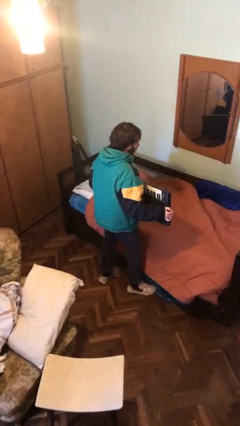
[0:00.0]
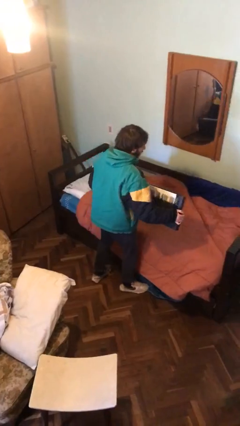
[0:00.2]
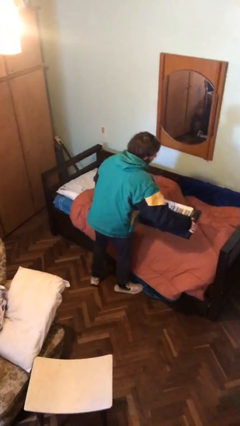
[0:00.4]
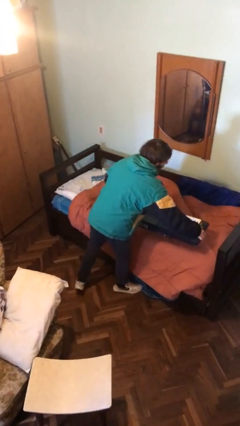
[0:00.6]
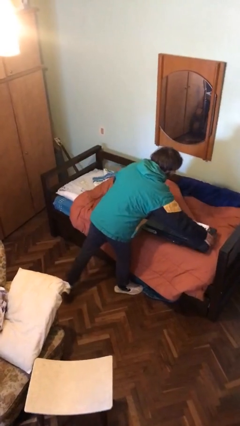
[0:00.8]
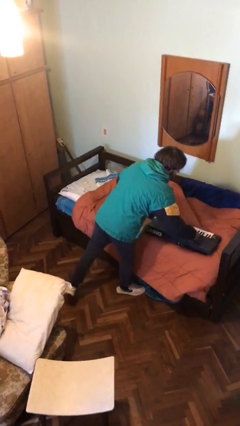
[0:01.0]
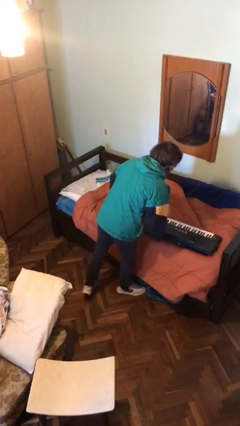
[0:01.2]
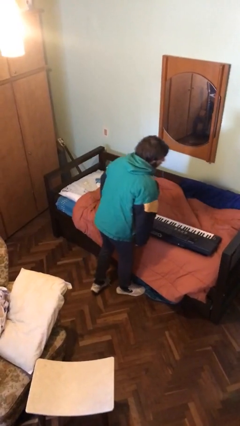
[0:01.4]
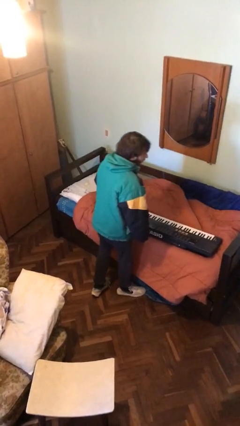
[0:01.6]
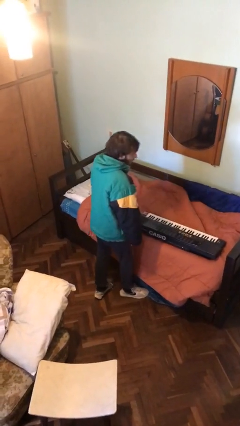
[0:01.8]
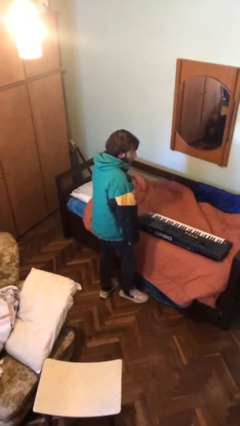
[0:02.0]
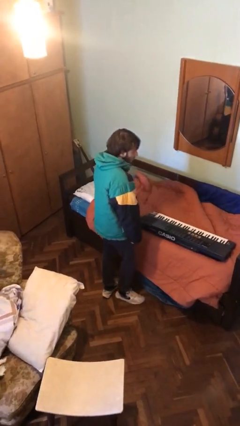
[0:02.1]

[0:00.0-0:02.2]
person puts down object on bed

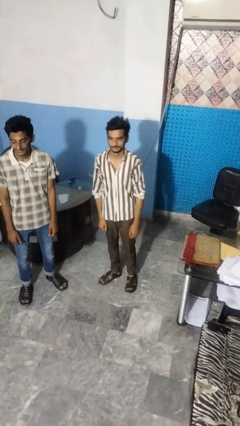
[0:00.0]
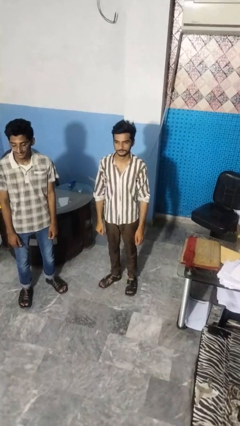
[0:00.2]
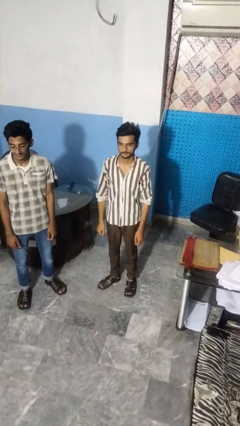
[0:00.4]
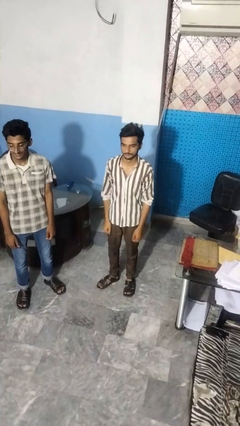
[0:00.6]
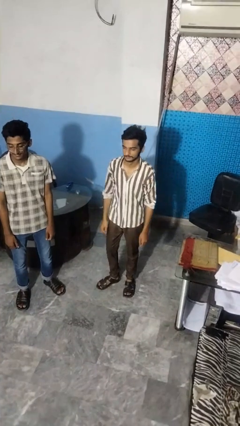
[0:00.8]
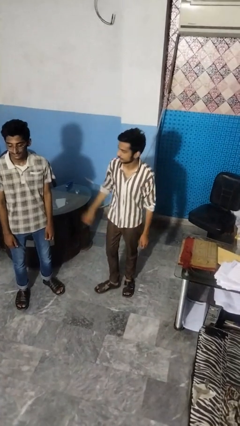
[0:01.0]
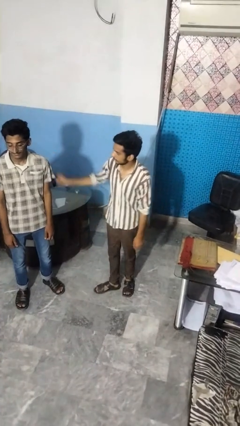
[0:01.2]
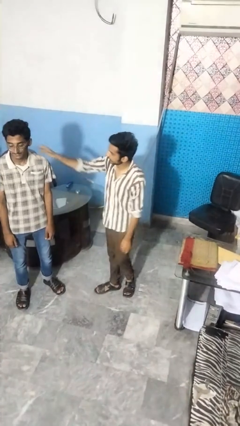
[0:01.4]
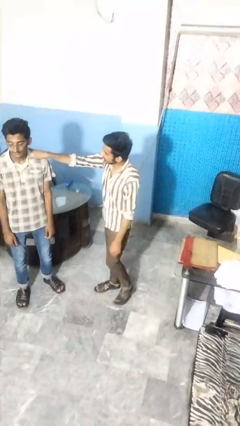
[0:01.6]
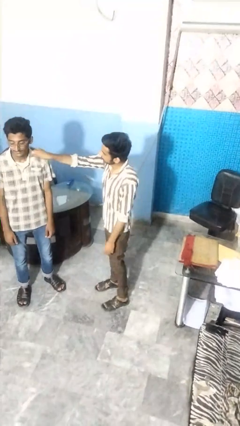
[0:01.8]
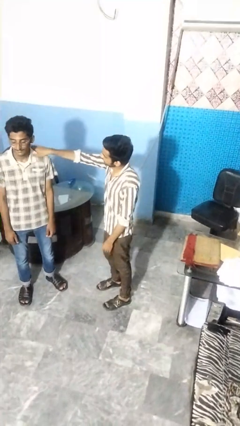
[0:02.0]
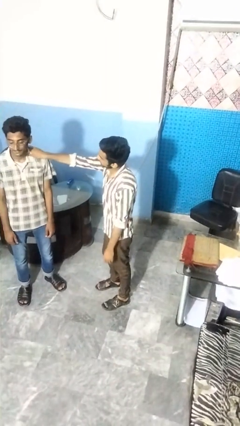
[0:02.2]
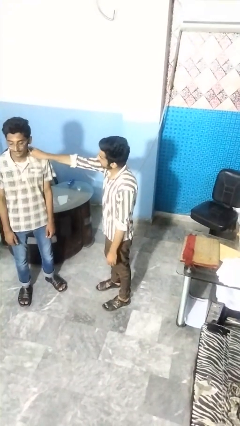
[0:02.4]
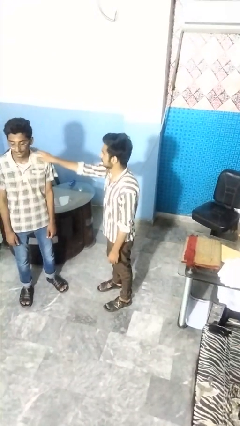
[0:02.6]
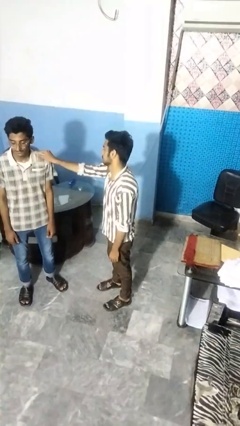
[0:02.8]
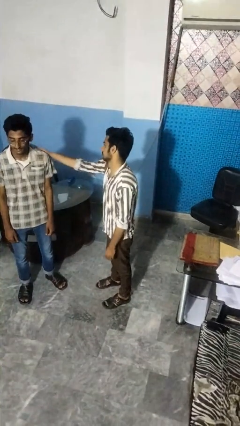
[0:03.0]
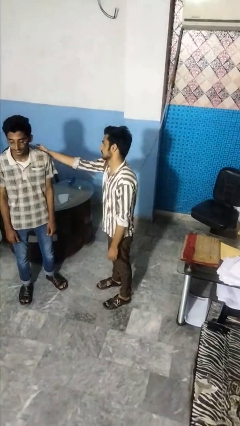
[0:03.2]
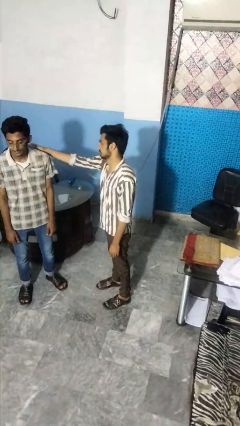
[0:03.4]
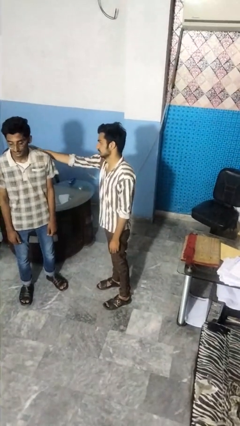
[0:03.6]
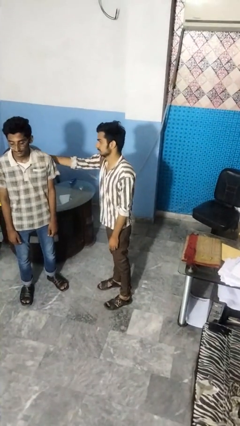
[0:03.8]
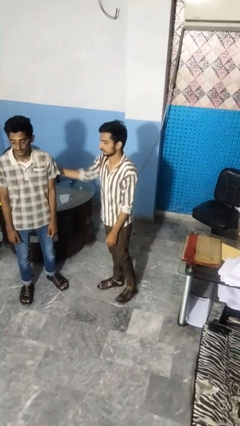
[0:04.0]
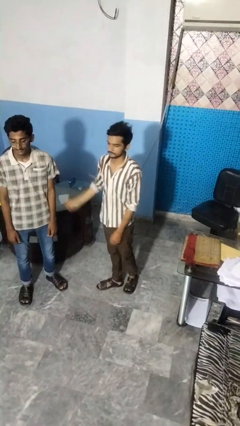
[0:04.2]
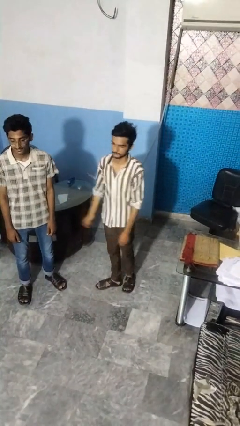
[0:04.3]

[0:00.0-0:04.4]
person pounds shoulders of person

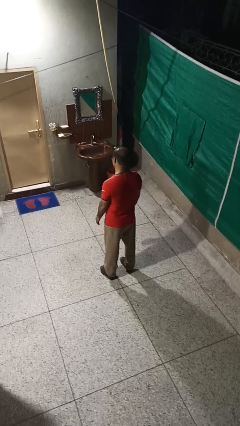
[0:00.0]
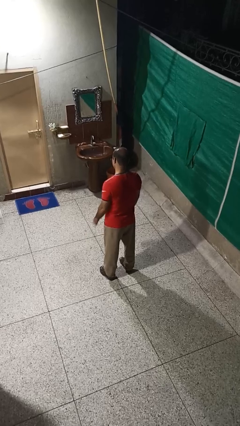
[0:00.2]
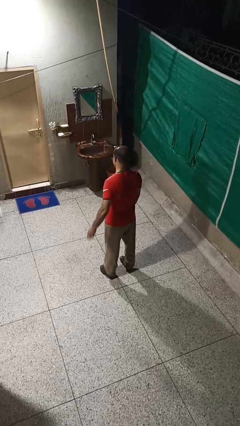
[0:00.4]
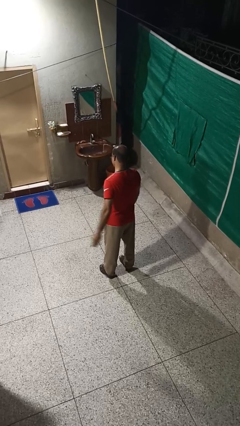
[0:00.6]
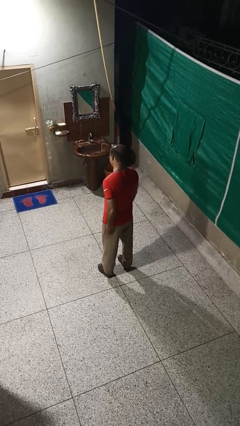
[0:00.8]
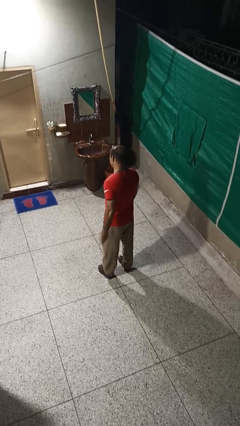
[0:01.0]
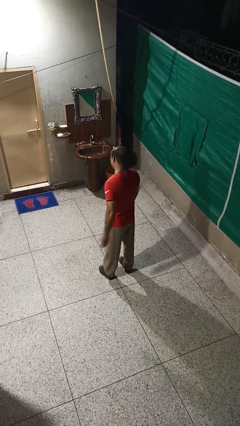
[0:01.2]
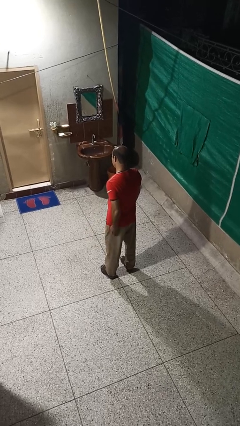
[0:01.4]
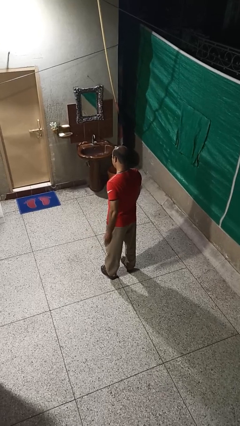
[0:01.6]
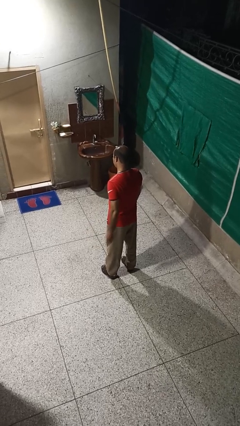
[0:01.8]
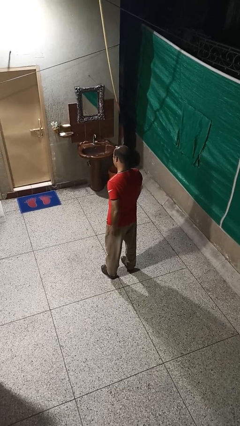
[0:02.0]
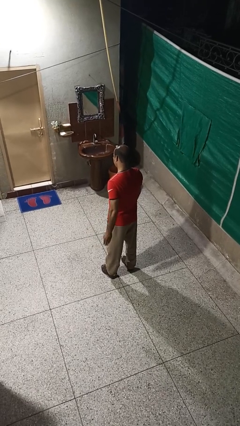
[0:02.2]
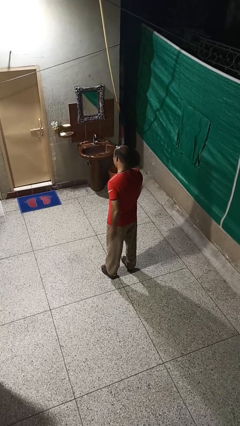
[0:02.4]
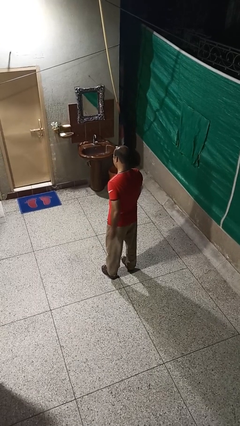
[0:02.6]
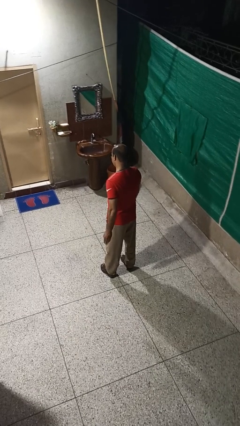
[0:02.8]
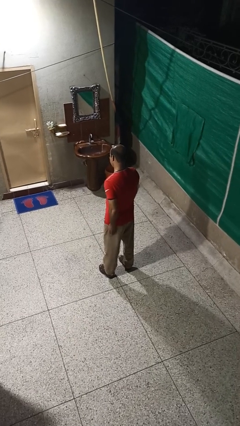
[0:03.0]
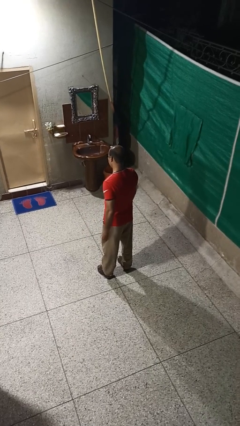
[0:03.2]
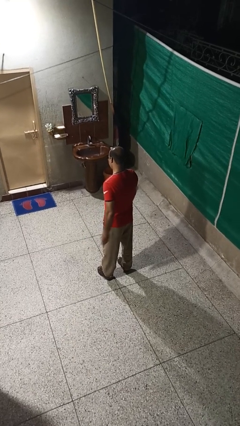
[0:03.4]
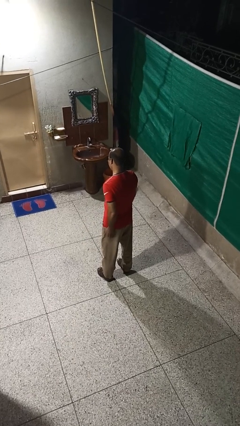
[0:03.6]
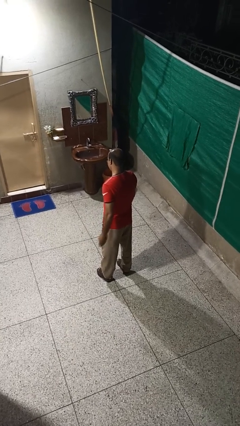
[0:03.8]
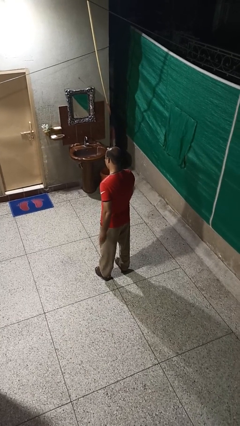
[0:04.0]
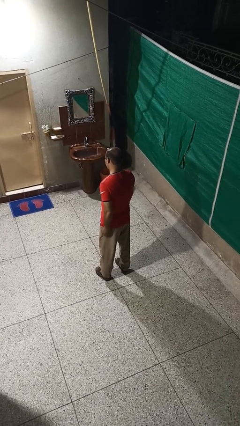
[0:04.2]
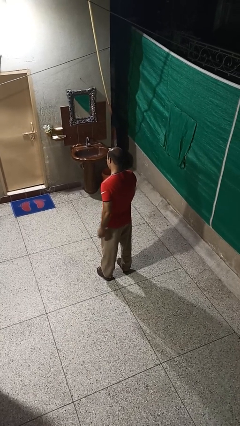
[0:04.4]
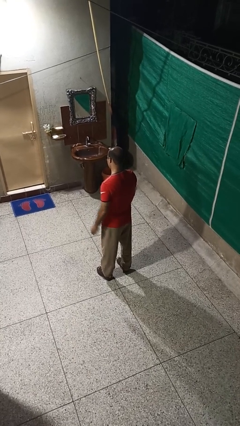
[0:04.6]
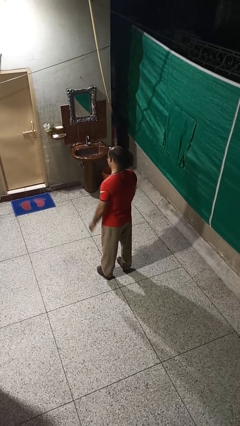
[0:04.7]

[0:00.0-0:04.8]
person slaps hands on thighs

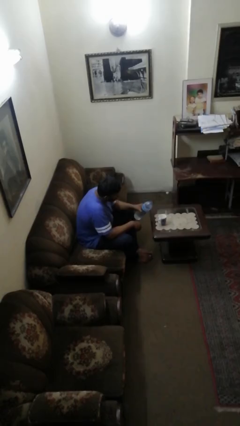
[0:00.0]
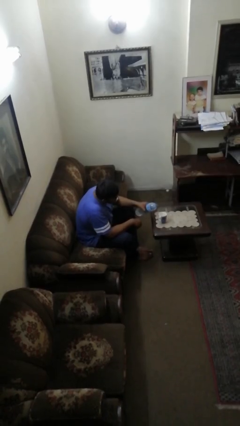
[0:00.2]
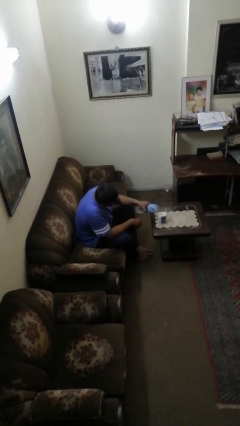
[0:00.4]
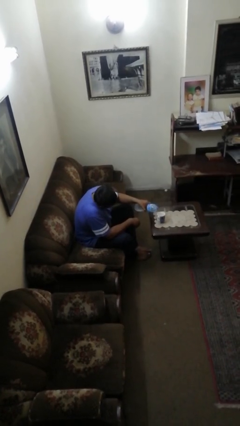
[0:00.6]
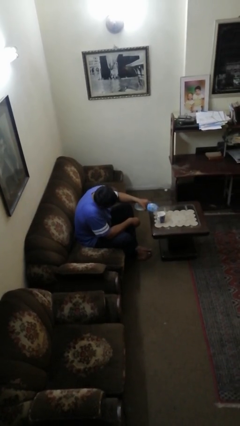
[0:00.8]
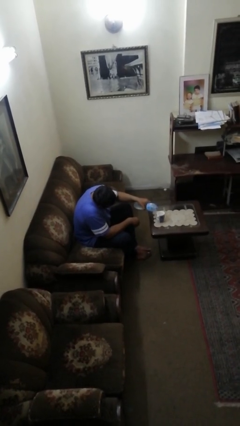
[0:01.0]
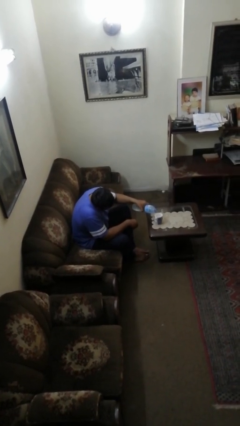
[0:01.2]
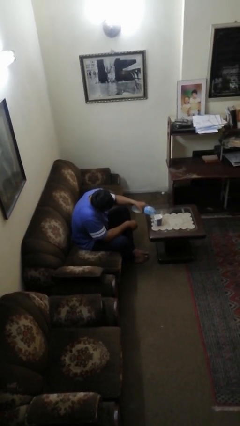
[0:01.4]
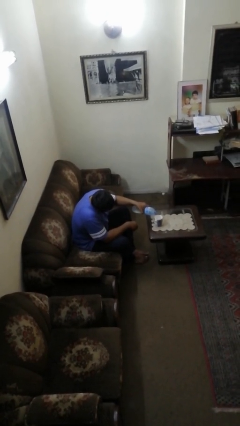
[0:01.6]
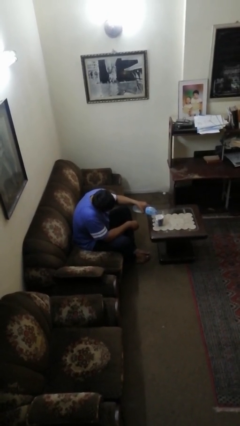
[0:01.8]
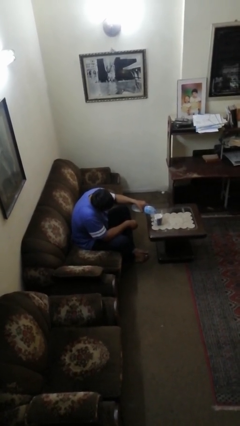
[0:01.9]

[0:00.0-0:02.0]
person pours liquid into cup

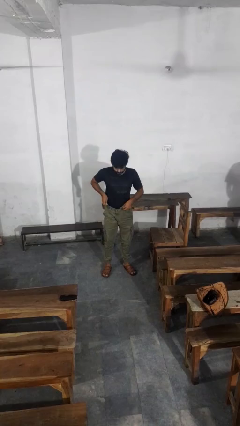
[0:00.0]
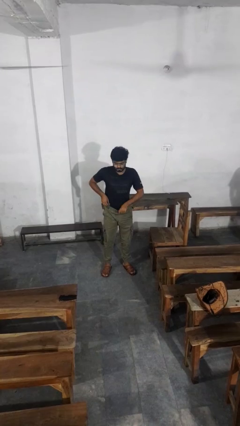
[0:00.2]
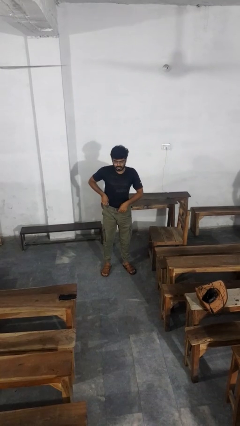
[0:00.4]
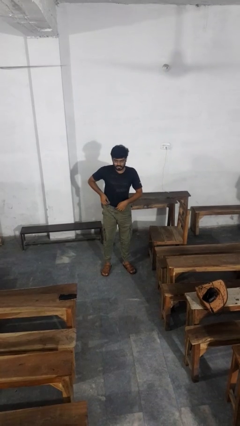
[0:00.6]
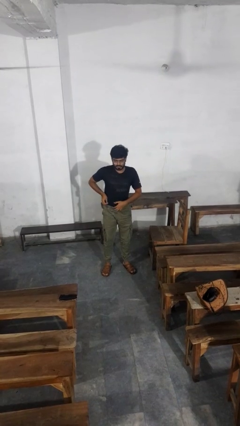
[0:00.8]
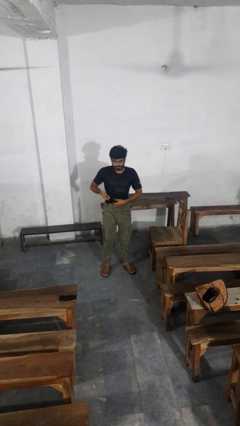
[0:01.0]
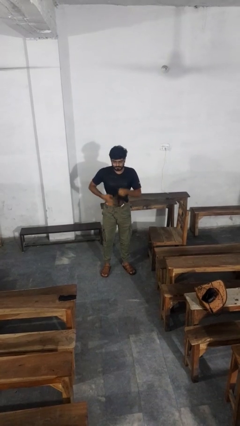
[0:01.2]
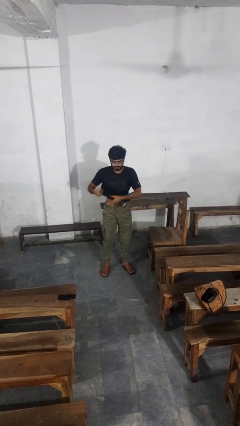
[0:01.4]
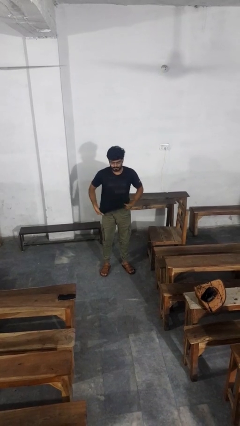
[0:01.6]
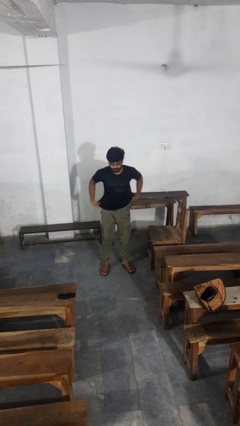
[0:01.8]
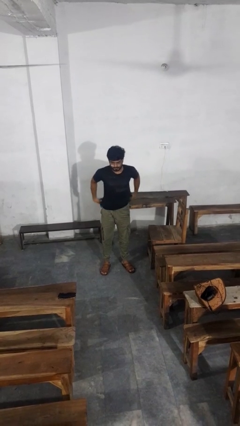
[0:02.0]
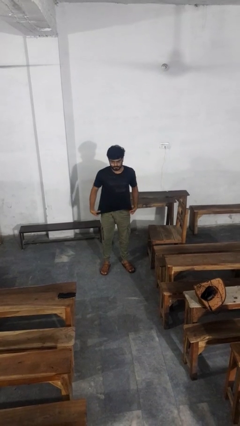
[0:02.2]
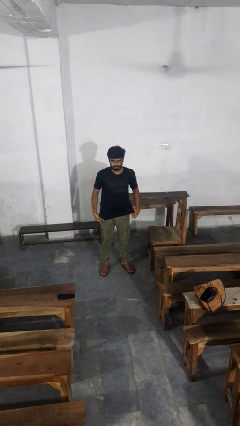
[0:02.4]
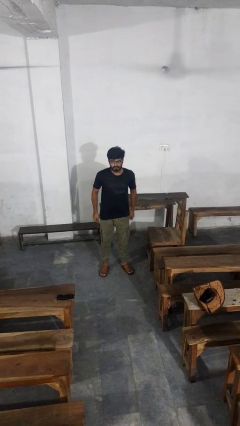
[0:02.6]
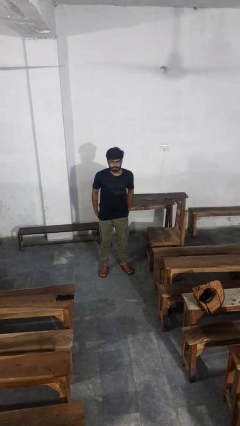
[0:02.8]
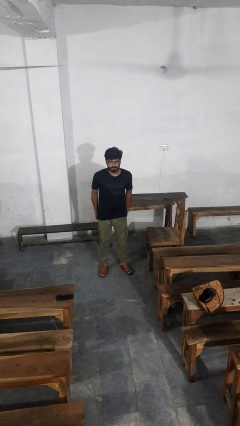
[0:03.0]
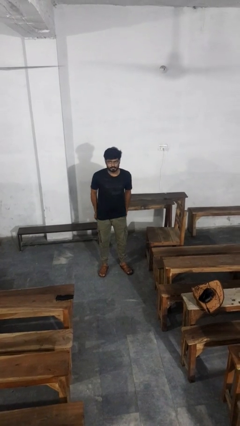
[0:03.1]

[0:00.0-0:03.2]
person untucks shirt

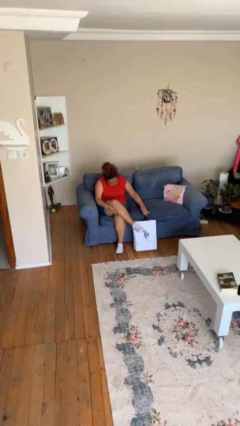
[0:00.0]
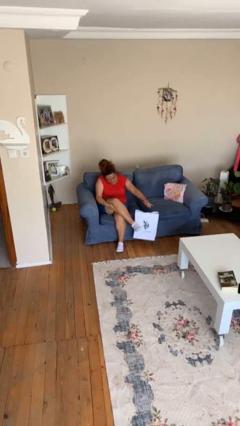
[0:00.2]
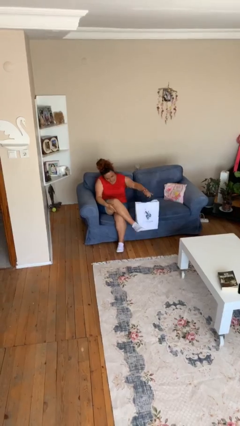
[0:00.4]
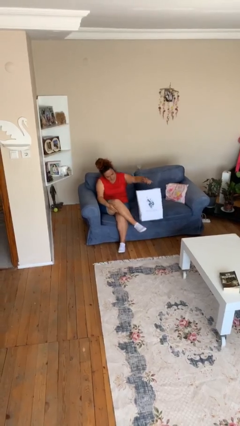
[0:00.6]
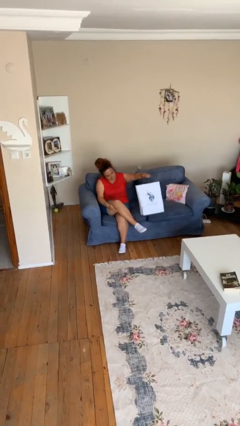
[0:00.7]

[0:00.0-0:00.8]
person picks up object from floor

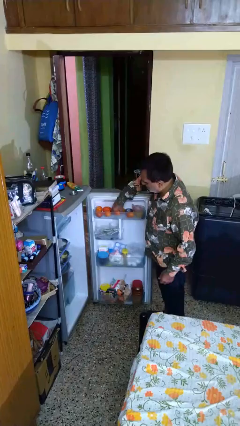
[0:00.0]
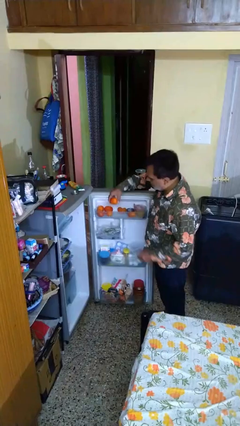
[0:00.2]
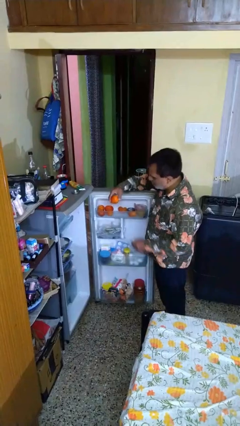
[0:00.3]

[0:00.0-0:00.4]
person takes object from refrigerator
